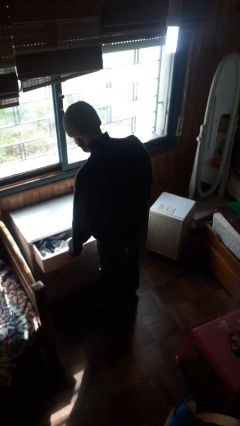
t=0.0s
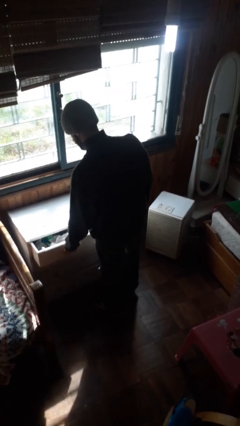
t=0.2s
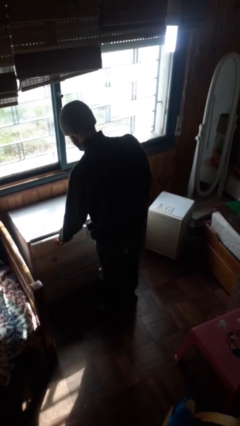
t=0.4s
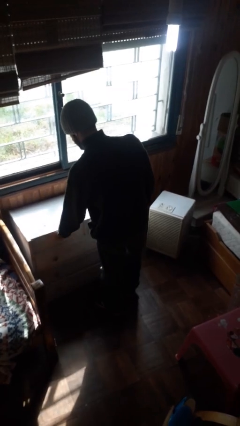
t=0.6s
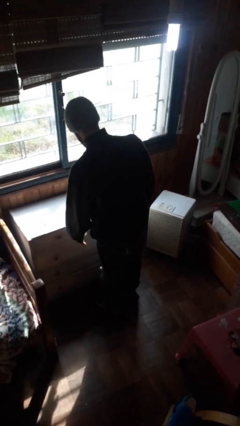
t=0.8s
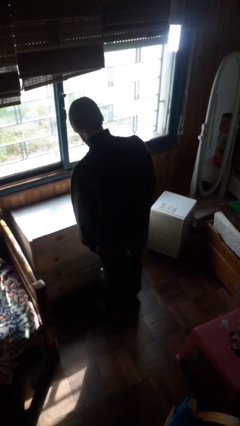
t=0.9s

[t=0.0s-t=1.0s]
person closes dresser drawer

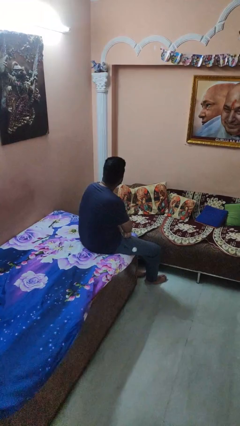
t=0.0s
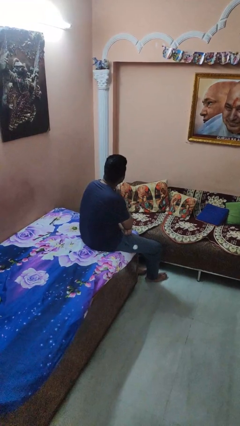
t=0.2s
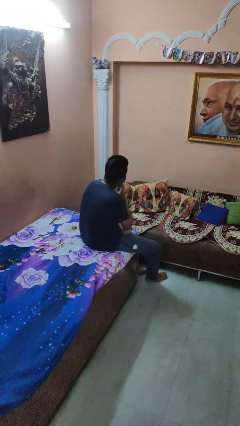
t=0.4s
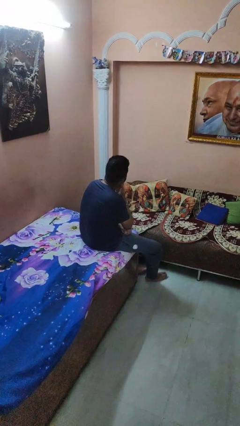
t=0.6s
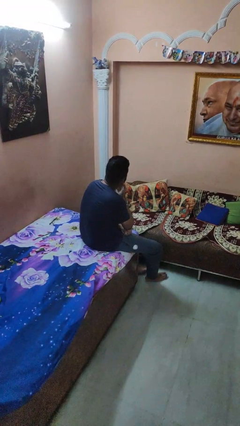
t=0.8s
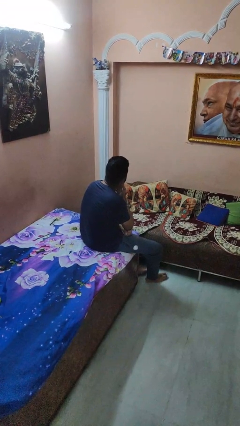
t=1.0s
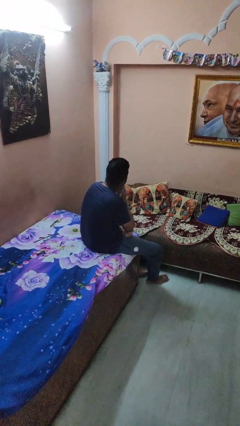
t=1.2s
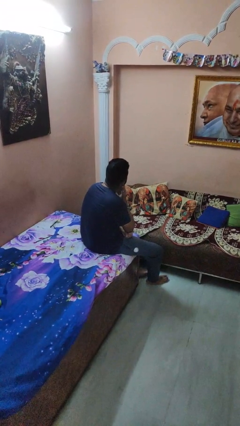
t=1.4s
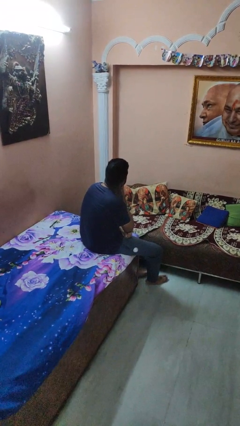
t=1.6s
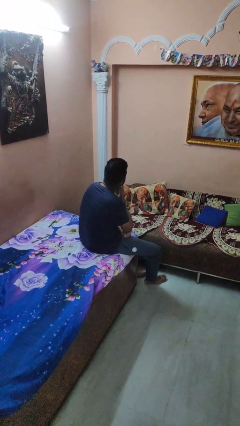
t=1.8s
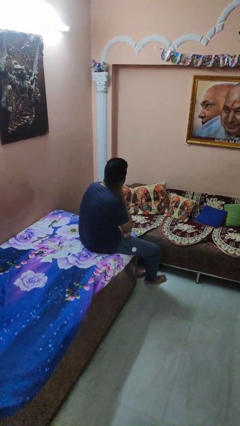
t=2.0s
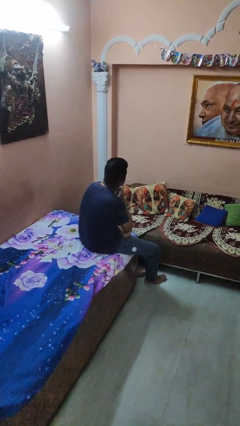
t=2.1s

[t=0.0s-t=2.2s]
person strokes chin

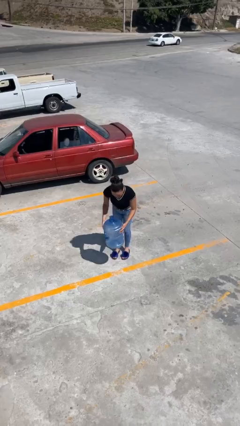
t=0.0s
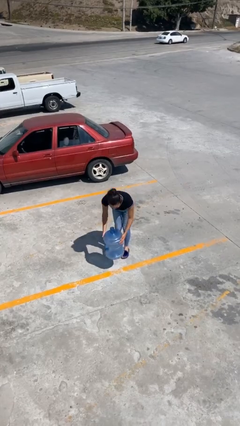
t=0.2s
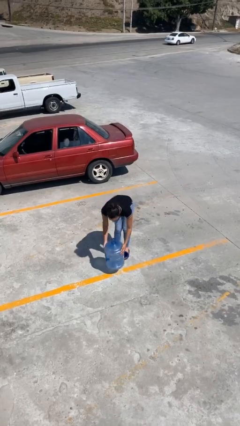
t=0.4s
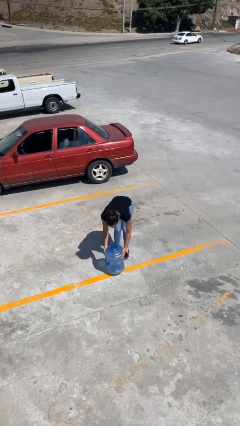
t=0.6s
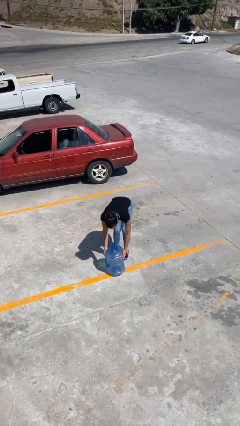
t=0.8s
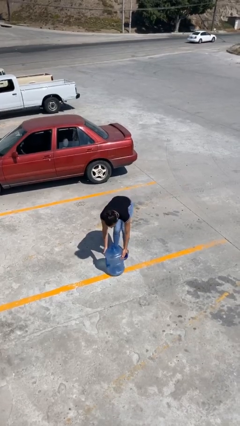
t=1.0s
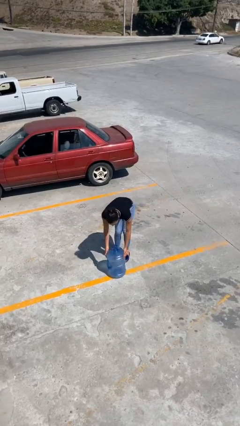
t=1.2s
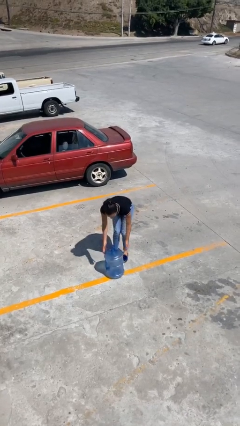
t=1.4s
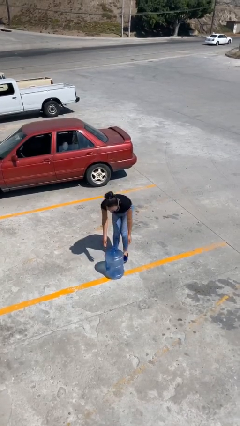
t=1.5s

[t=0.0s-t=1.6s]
person puts down object on floor

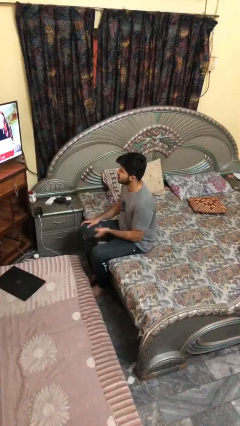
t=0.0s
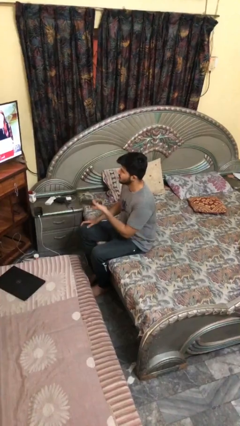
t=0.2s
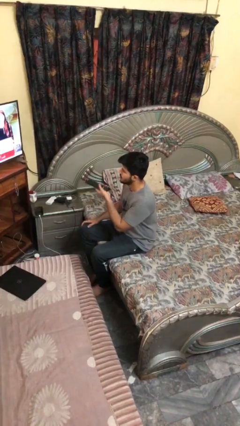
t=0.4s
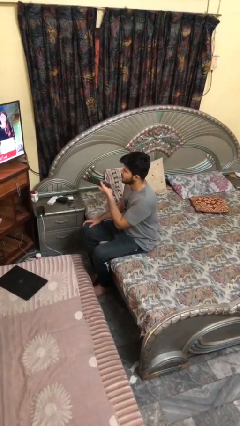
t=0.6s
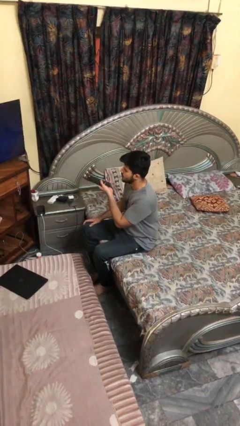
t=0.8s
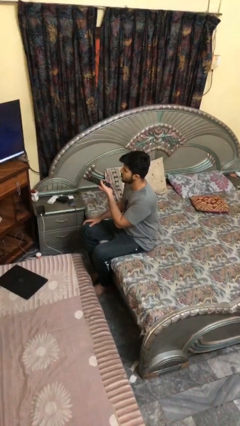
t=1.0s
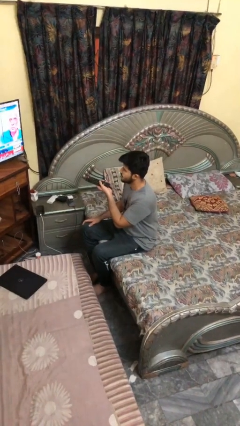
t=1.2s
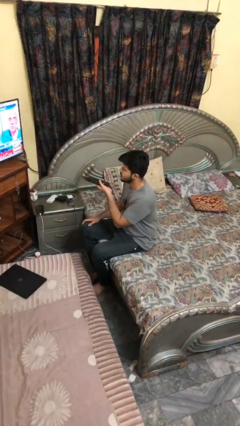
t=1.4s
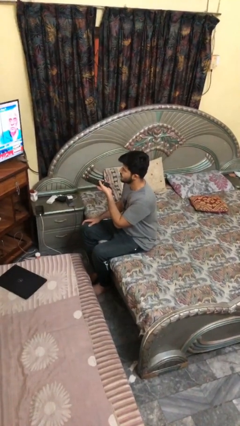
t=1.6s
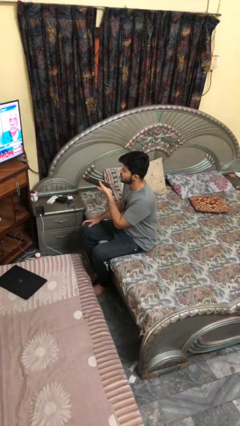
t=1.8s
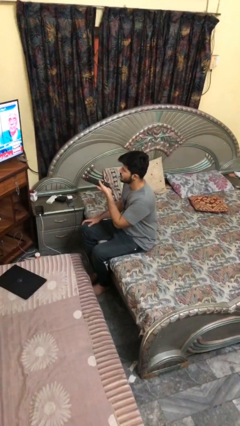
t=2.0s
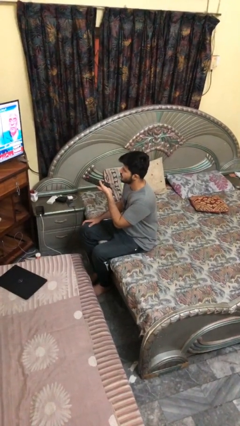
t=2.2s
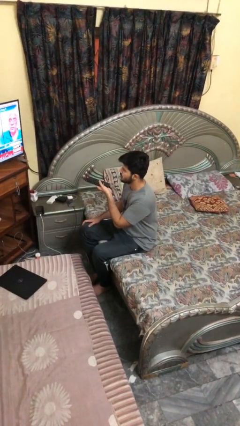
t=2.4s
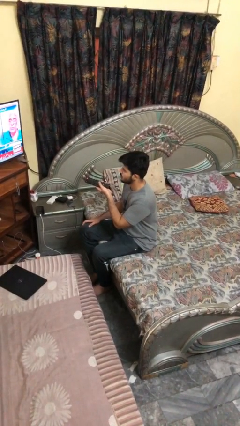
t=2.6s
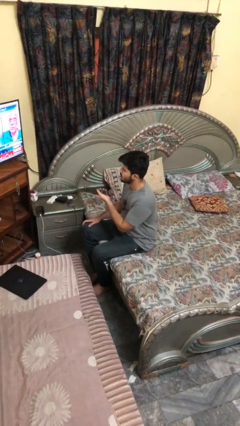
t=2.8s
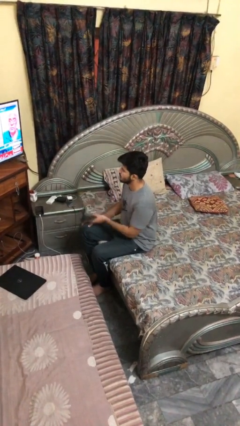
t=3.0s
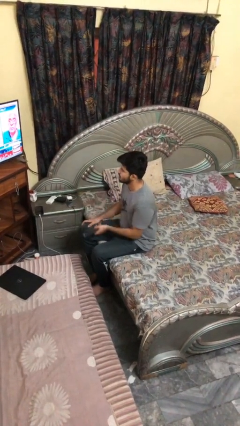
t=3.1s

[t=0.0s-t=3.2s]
person uses television remote

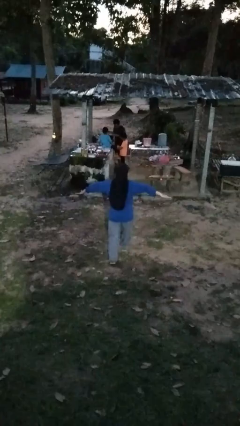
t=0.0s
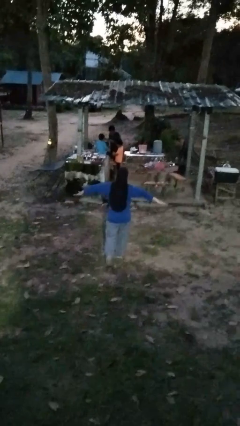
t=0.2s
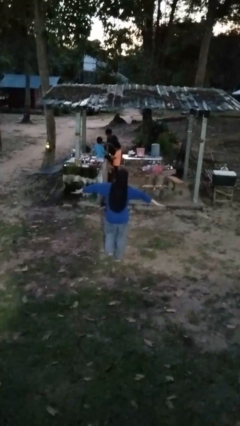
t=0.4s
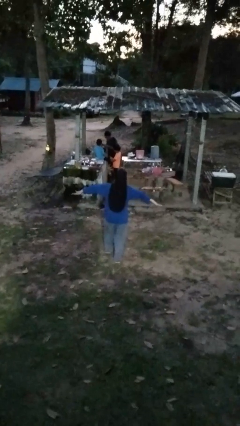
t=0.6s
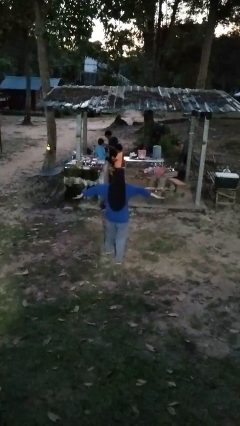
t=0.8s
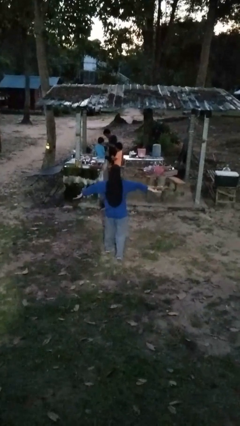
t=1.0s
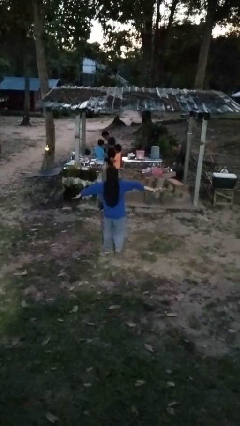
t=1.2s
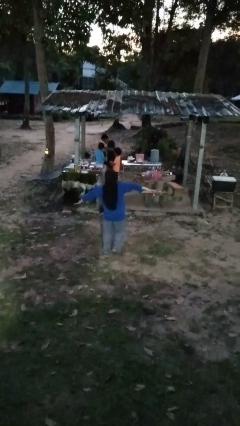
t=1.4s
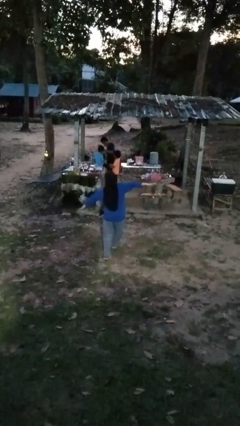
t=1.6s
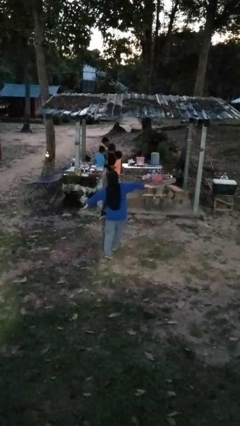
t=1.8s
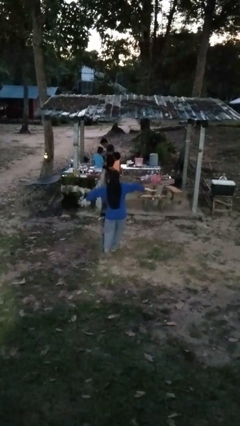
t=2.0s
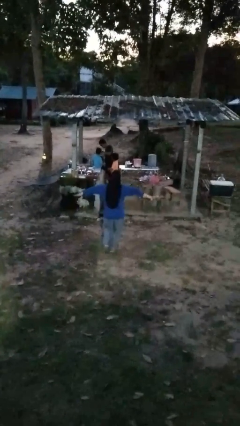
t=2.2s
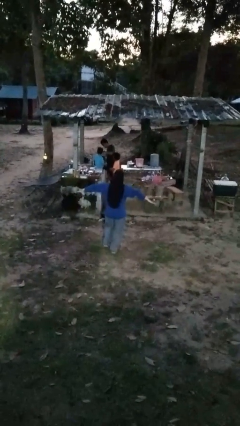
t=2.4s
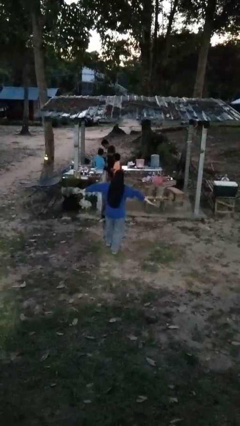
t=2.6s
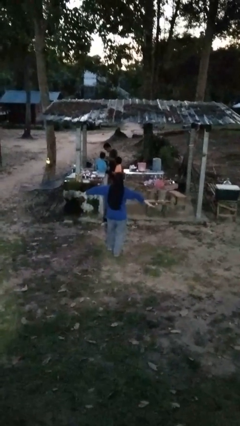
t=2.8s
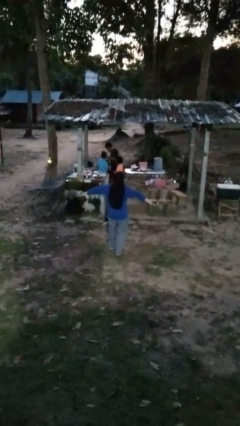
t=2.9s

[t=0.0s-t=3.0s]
person walks tiptoe

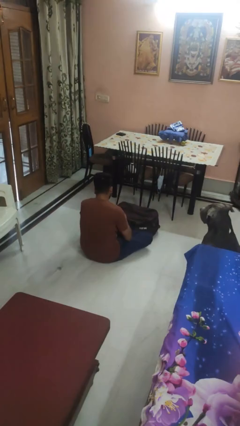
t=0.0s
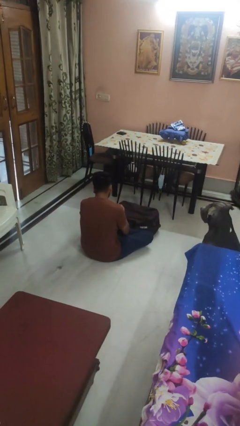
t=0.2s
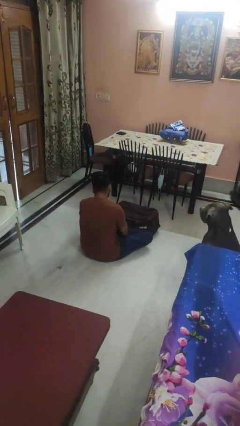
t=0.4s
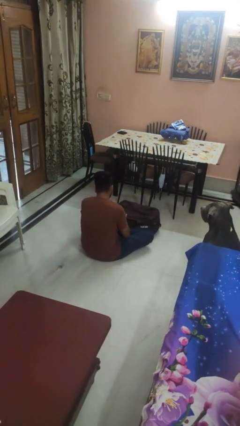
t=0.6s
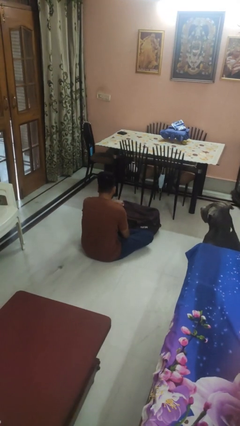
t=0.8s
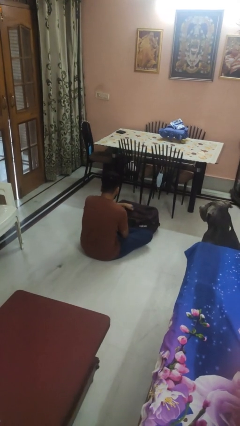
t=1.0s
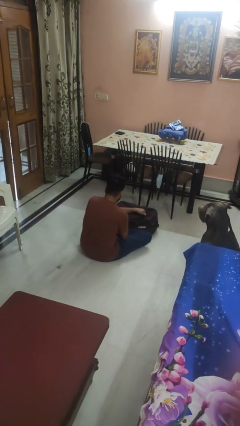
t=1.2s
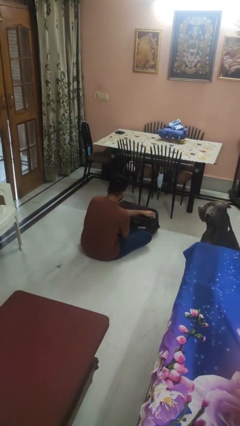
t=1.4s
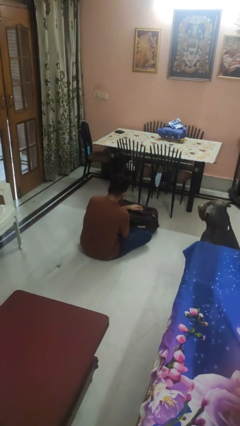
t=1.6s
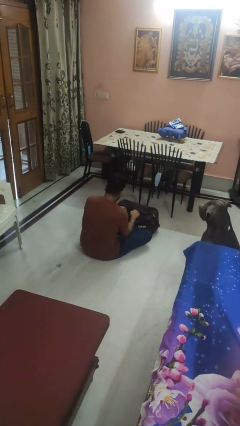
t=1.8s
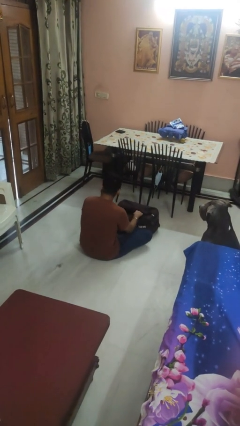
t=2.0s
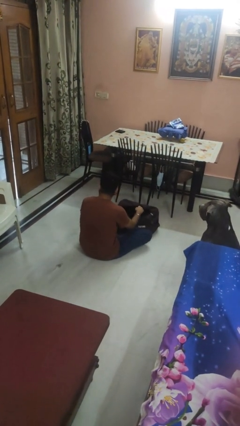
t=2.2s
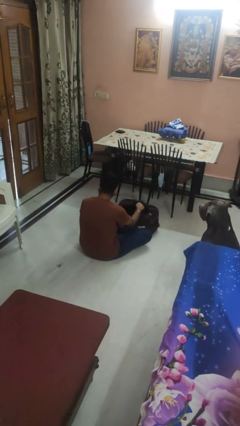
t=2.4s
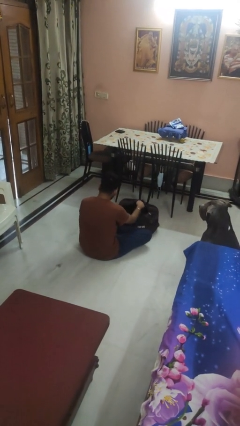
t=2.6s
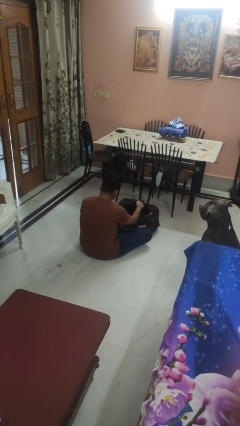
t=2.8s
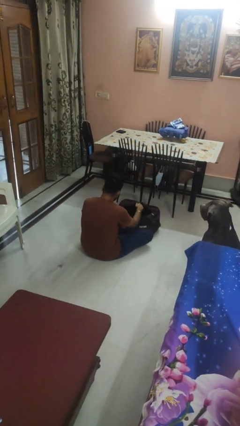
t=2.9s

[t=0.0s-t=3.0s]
person opens suitcase

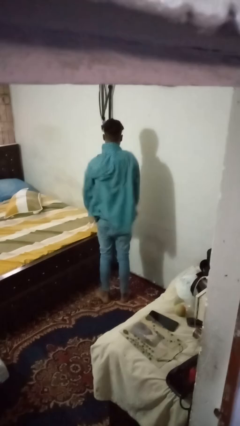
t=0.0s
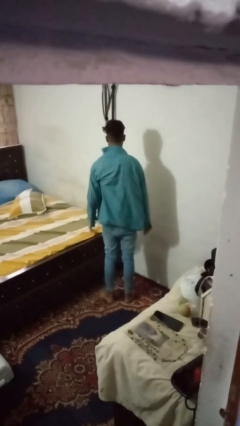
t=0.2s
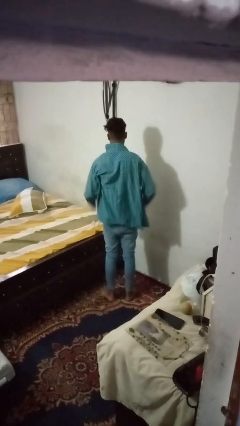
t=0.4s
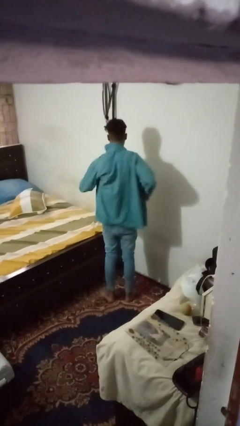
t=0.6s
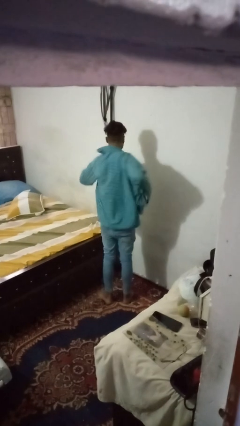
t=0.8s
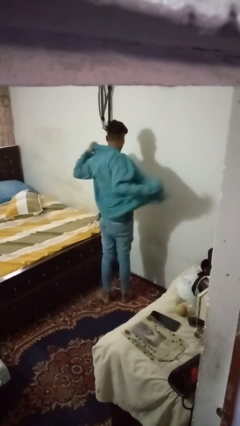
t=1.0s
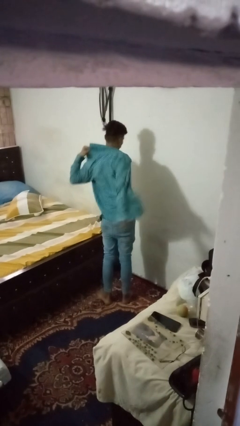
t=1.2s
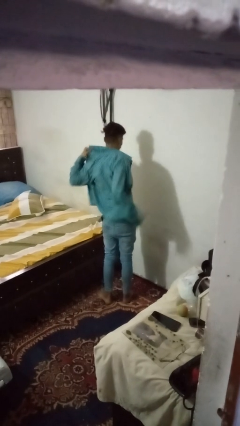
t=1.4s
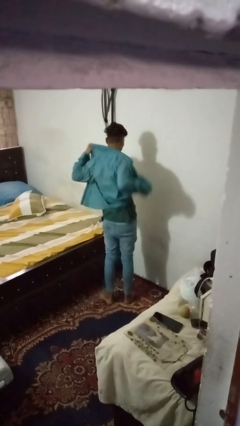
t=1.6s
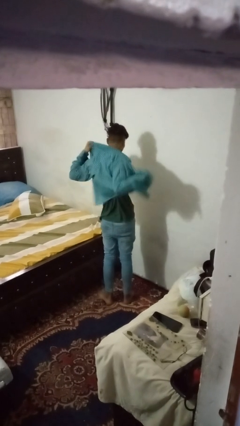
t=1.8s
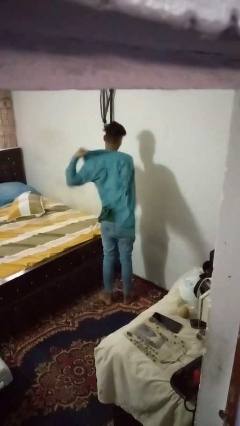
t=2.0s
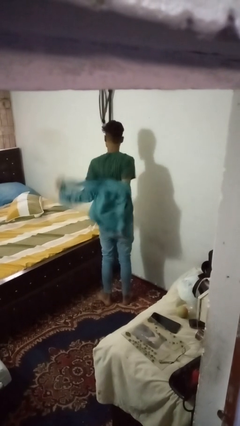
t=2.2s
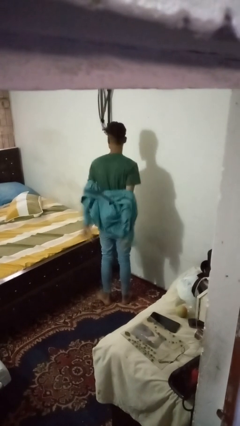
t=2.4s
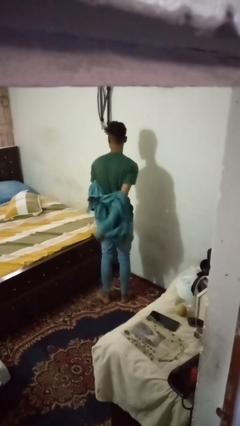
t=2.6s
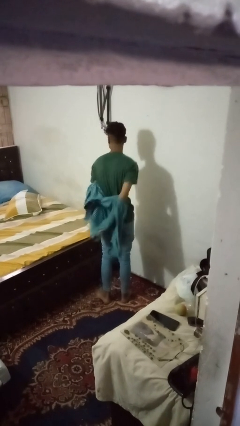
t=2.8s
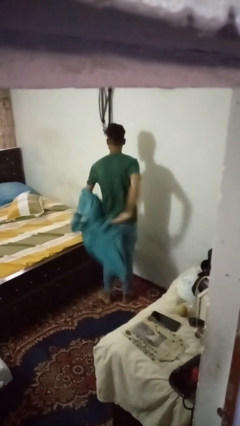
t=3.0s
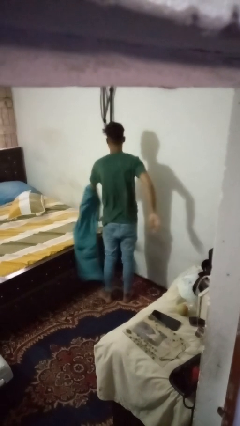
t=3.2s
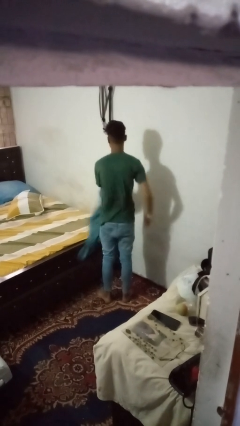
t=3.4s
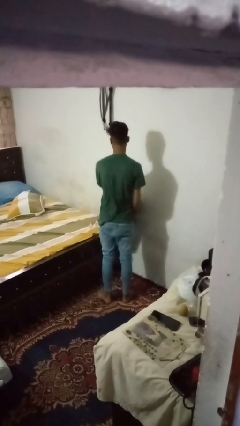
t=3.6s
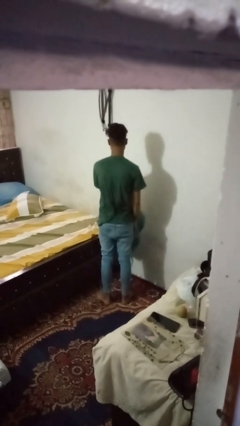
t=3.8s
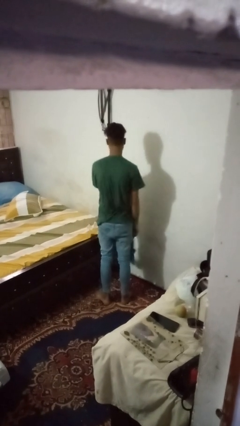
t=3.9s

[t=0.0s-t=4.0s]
person takes off shirt
